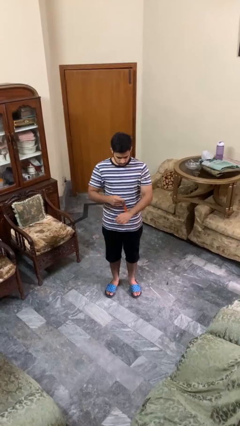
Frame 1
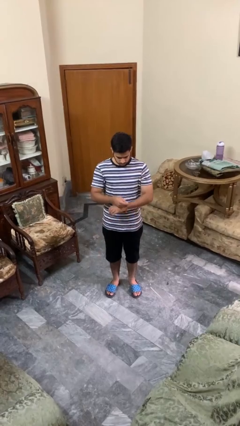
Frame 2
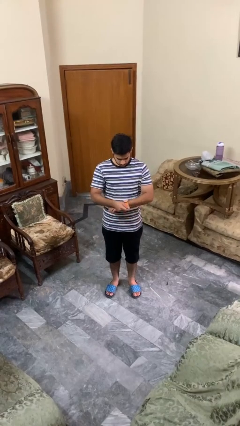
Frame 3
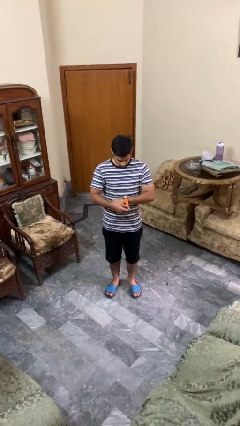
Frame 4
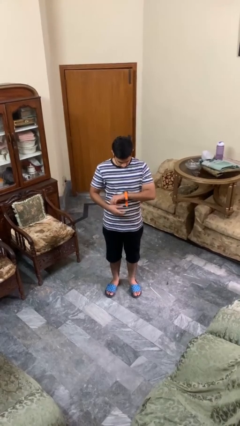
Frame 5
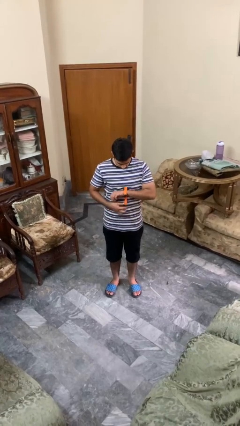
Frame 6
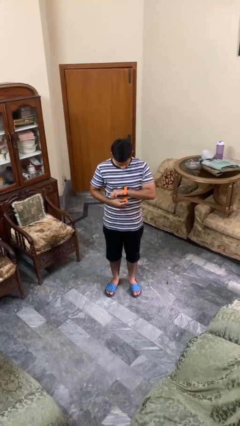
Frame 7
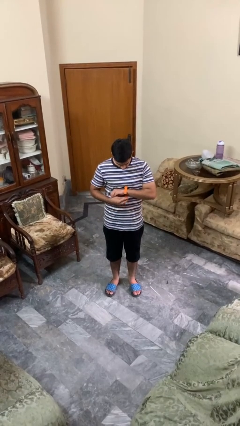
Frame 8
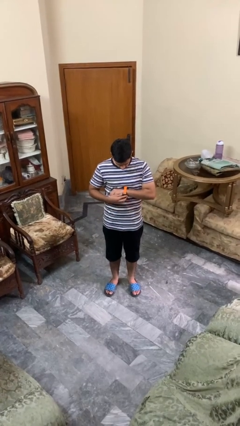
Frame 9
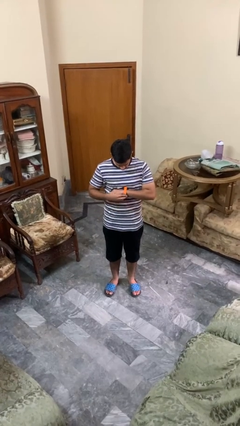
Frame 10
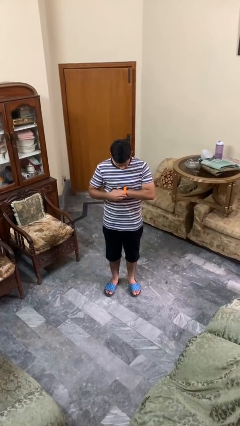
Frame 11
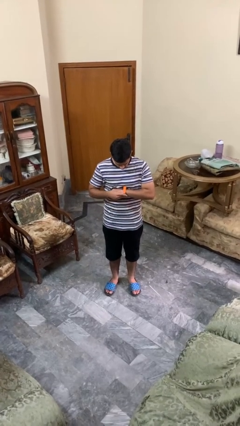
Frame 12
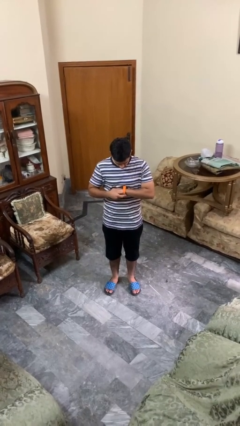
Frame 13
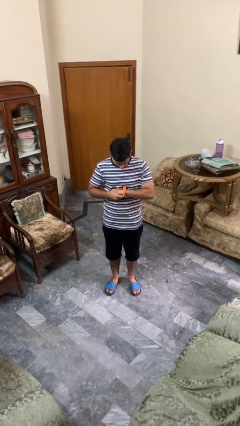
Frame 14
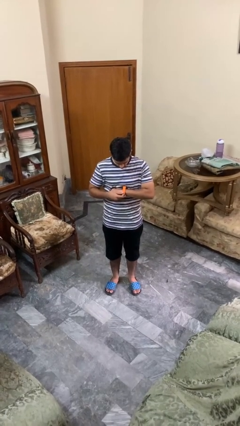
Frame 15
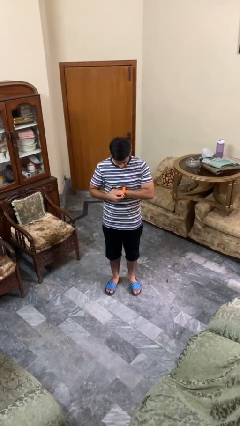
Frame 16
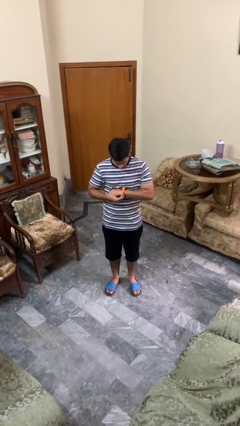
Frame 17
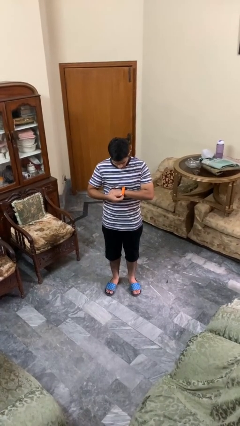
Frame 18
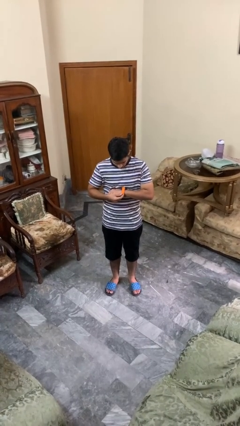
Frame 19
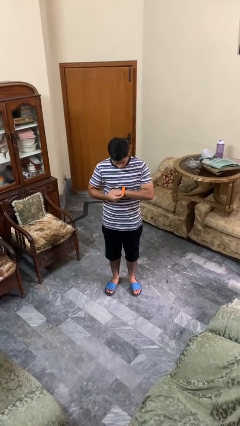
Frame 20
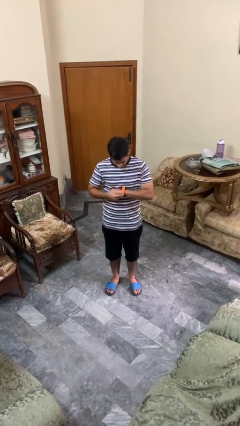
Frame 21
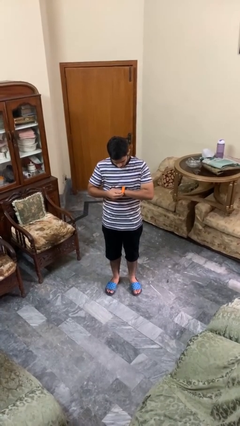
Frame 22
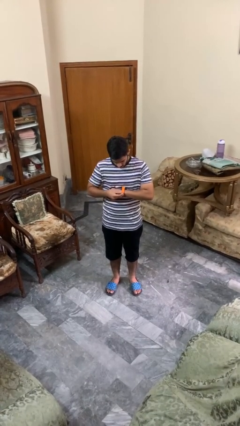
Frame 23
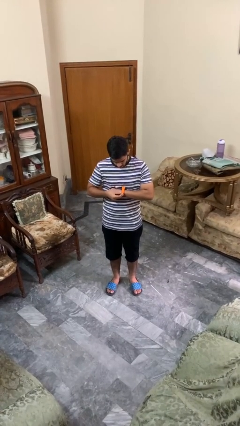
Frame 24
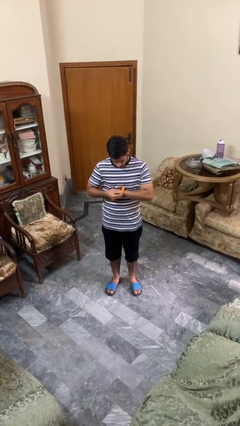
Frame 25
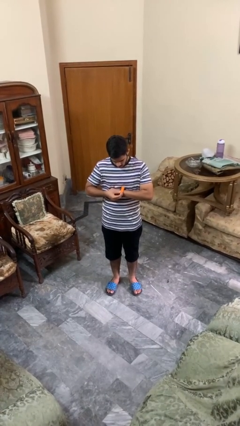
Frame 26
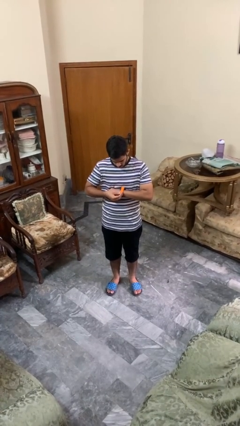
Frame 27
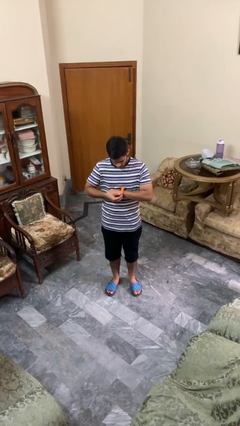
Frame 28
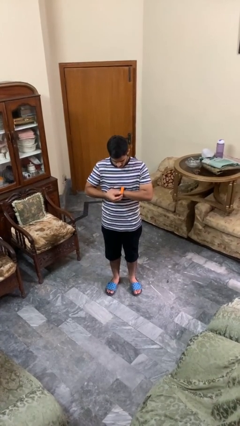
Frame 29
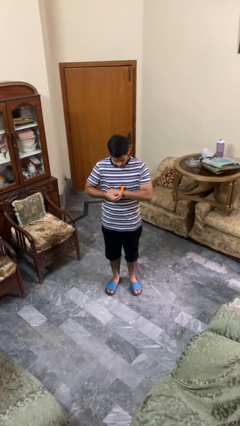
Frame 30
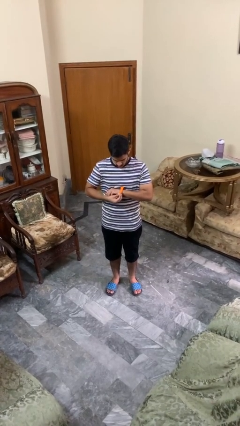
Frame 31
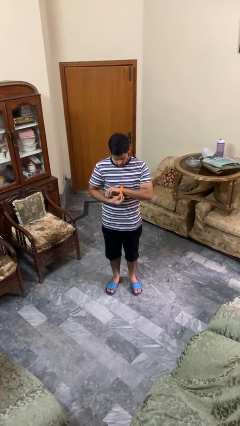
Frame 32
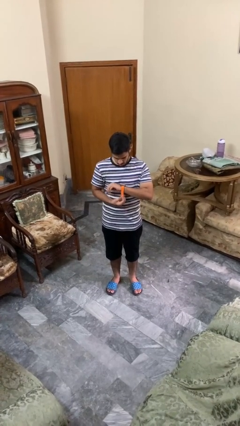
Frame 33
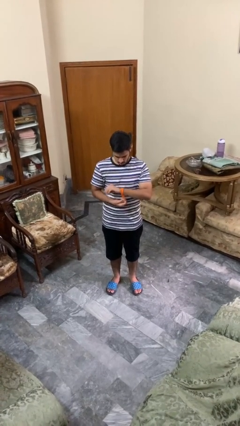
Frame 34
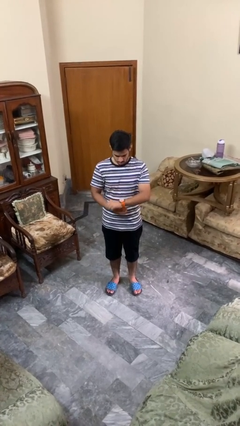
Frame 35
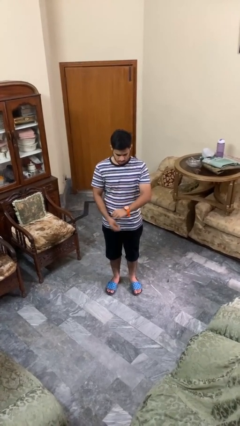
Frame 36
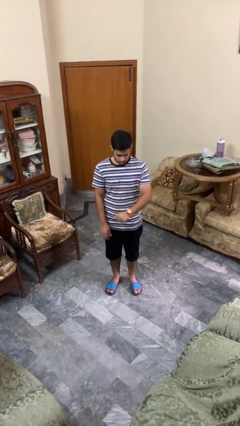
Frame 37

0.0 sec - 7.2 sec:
person puts on wristwatch

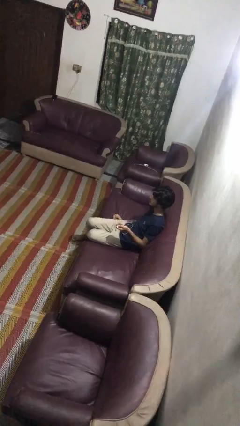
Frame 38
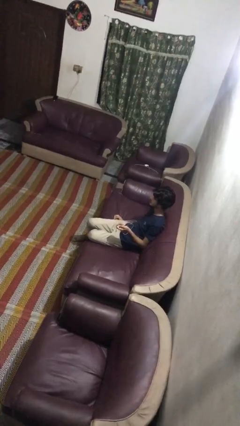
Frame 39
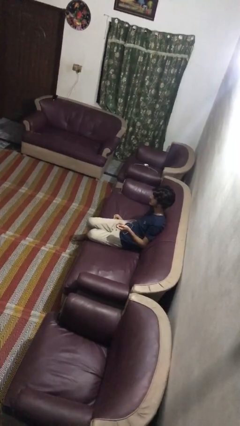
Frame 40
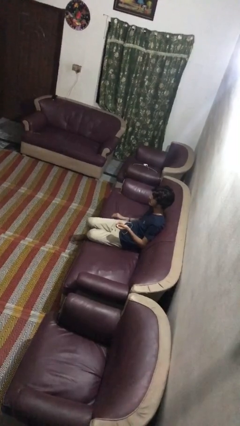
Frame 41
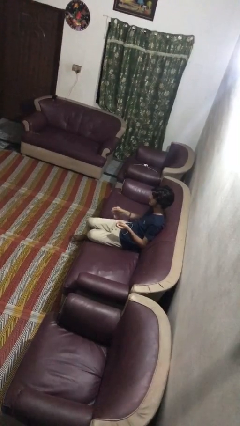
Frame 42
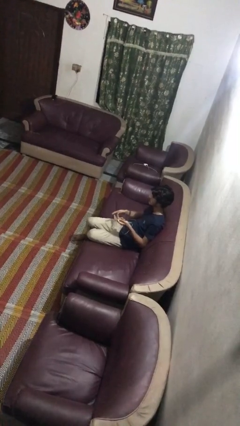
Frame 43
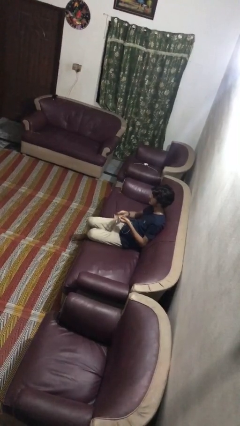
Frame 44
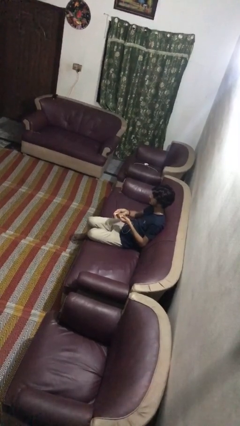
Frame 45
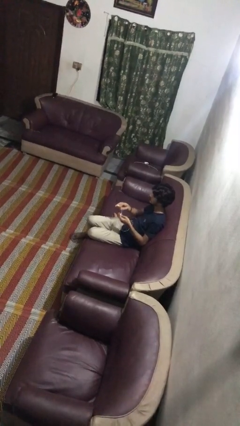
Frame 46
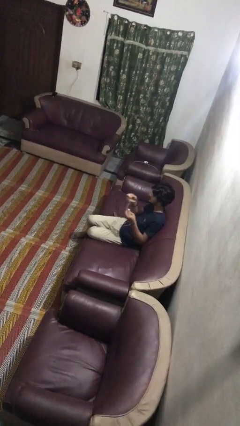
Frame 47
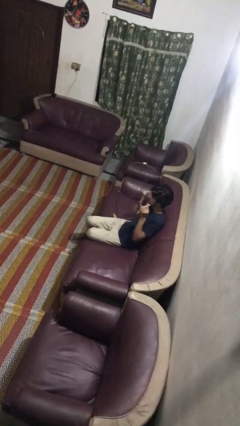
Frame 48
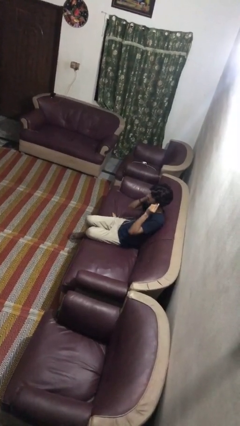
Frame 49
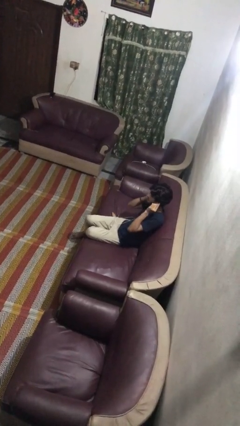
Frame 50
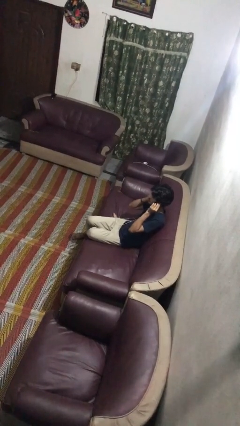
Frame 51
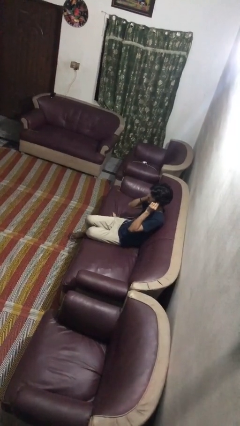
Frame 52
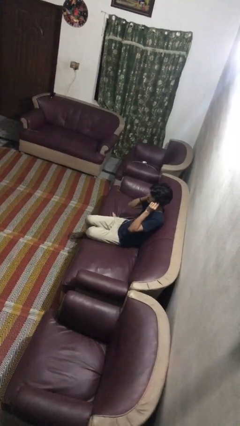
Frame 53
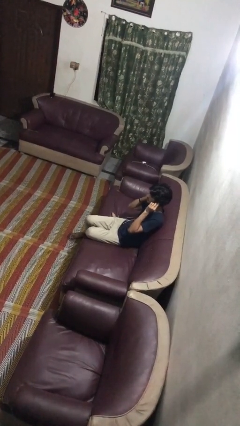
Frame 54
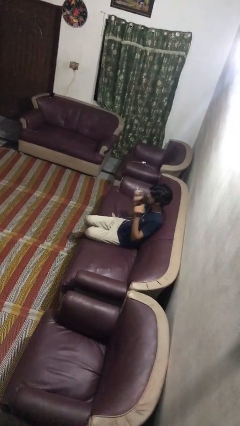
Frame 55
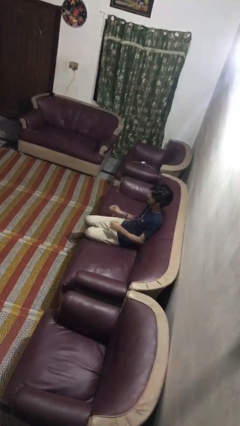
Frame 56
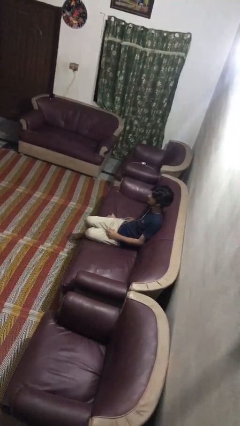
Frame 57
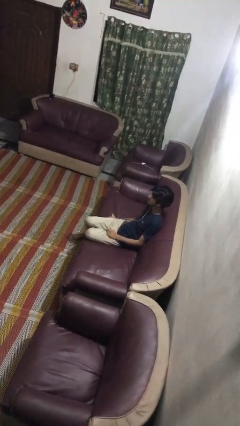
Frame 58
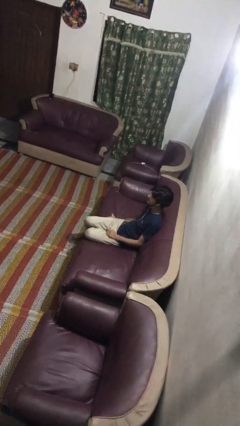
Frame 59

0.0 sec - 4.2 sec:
person puts on headphones

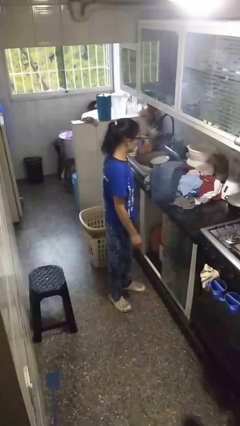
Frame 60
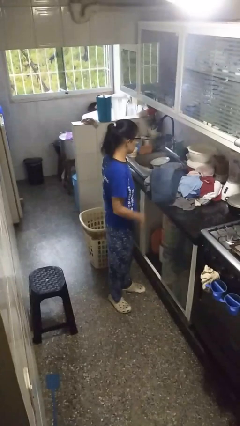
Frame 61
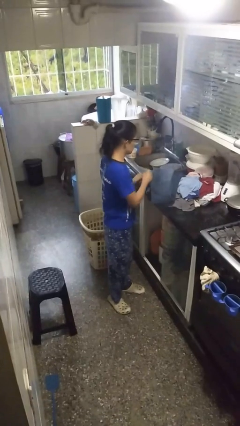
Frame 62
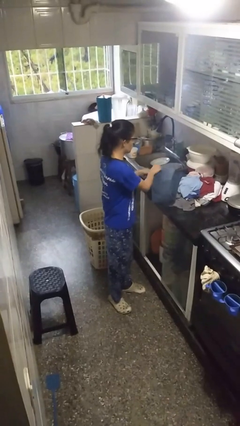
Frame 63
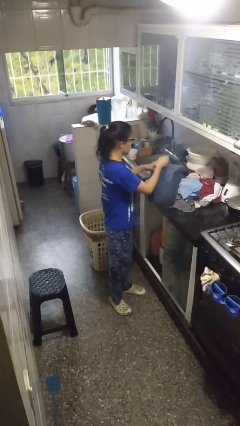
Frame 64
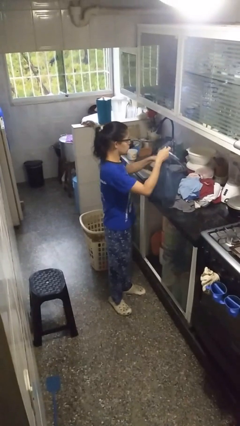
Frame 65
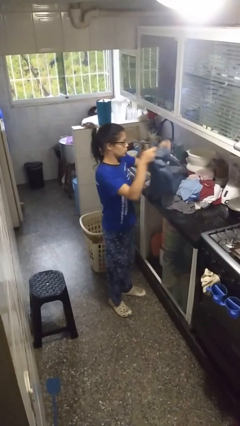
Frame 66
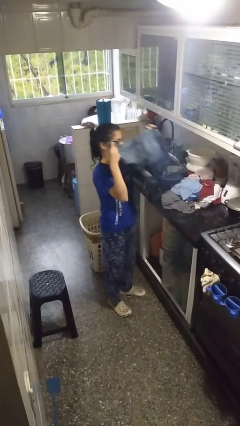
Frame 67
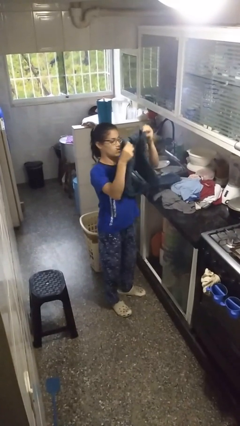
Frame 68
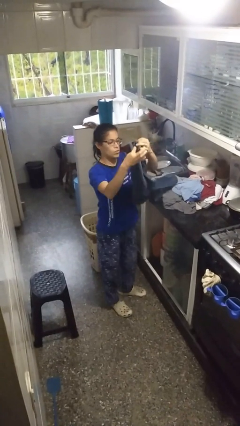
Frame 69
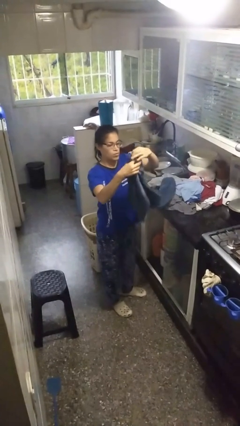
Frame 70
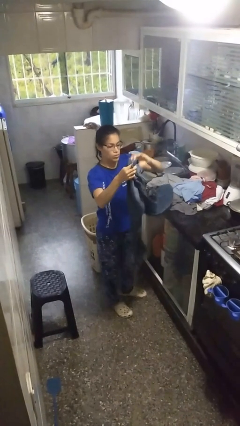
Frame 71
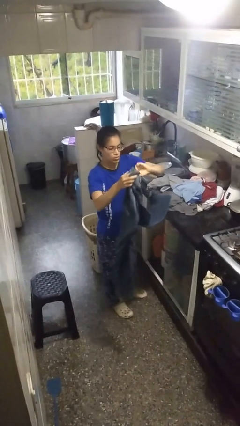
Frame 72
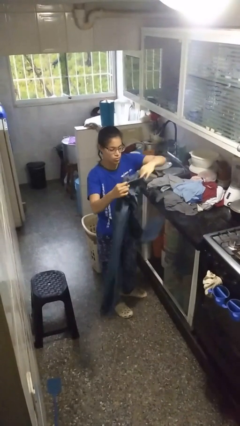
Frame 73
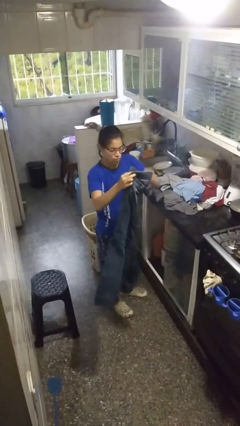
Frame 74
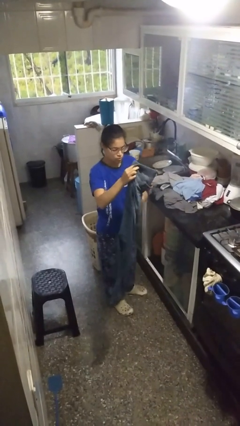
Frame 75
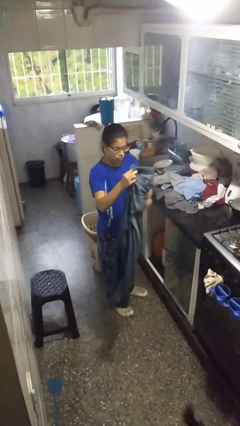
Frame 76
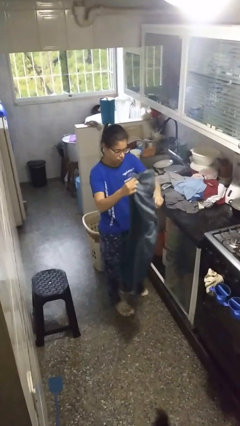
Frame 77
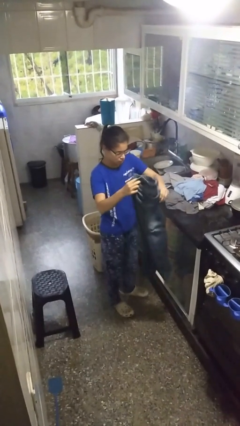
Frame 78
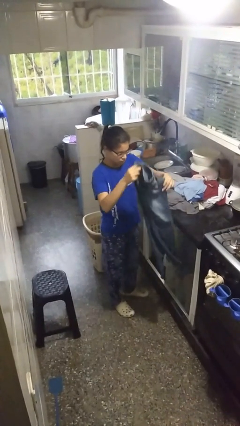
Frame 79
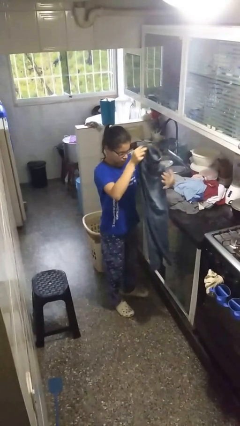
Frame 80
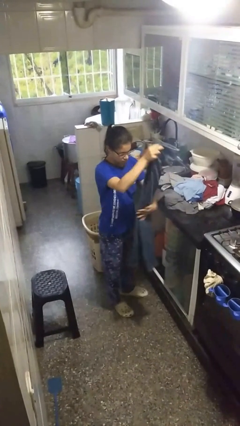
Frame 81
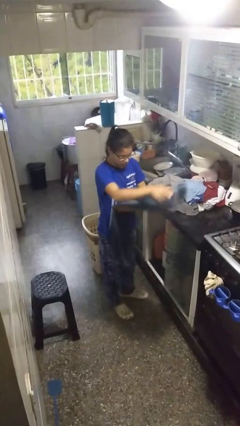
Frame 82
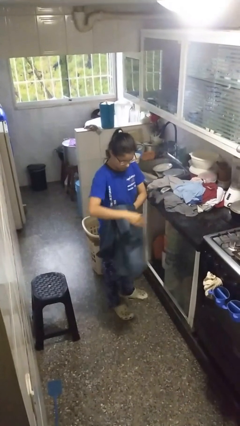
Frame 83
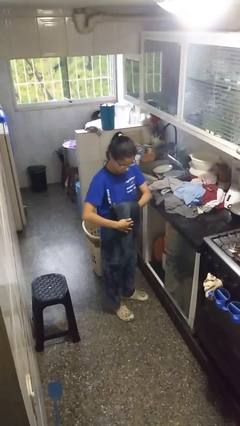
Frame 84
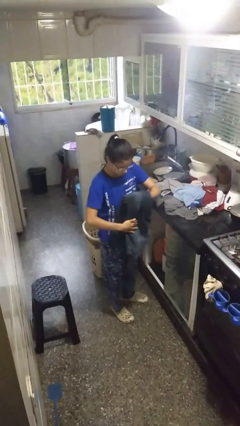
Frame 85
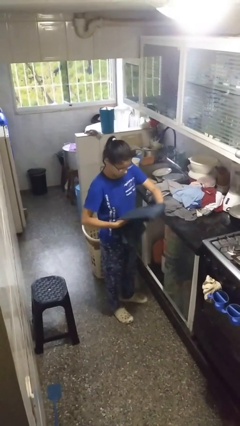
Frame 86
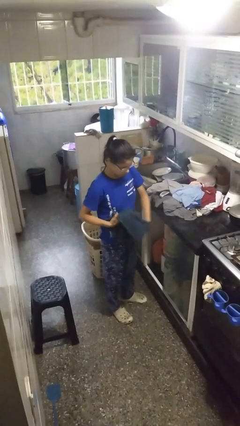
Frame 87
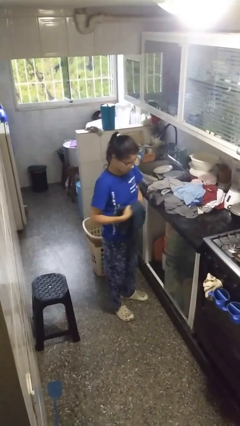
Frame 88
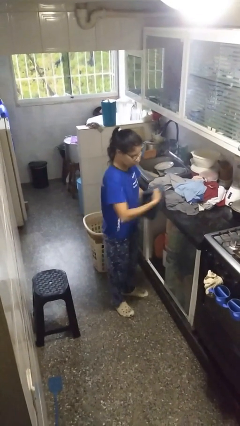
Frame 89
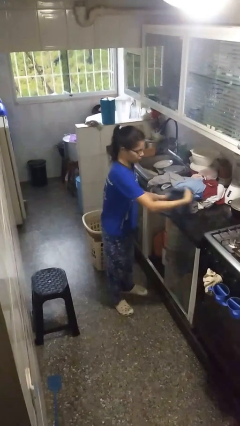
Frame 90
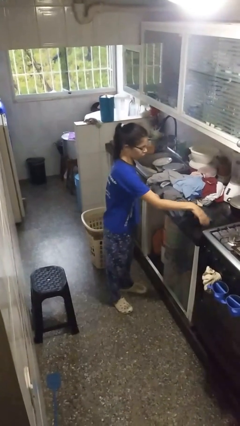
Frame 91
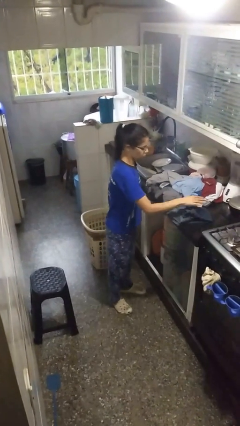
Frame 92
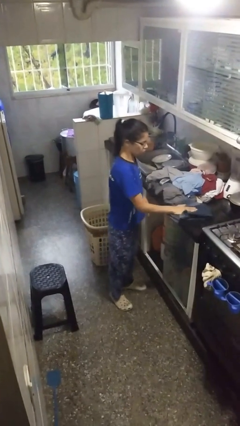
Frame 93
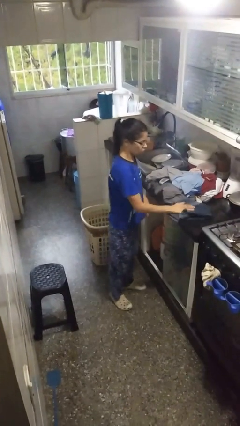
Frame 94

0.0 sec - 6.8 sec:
person folds pants

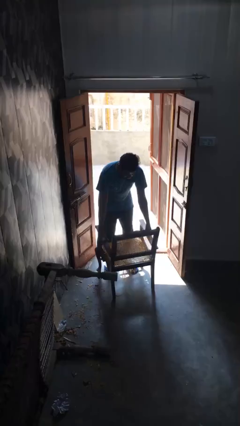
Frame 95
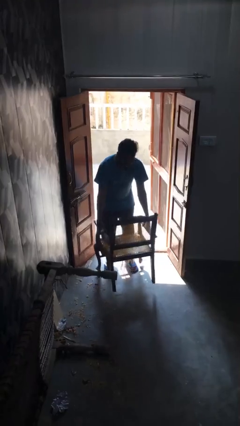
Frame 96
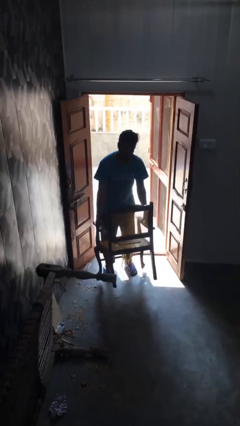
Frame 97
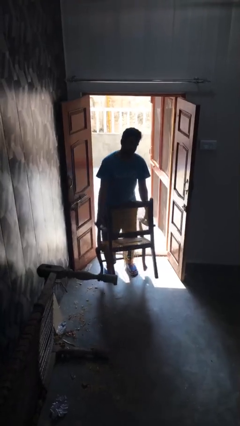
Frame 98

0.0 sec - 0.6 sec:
person picks up object from floor
